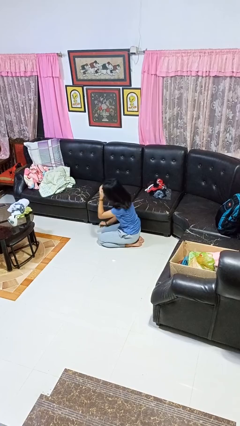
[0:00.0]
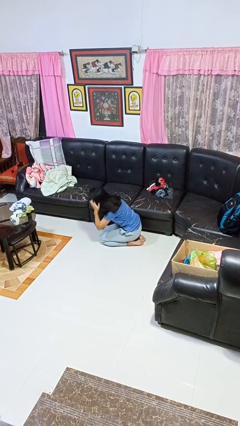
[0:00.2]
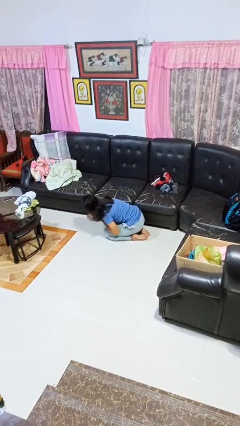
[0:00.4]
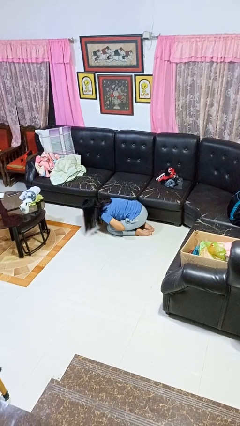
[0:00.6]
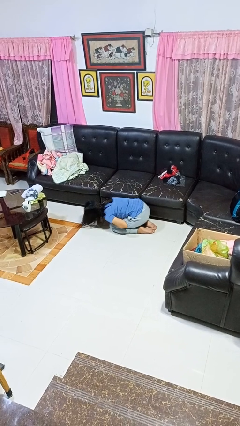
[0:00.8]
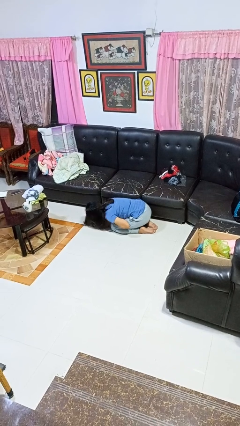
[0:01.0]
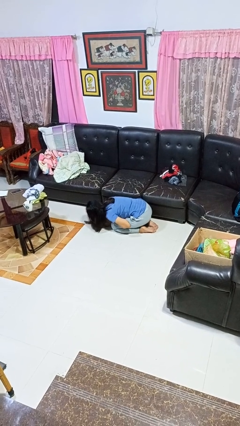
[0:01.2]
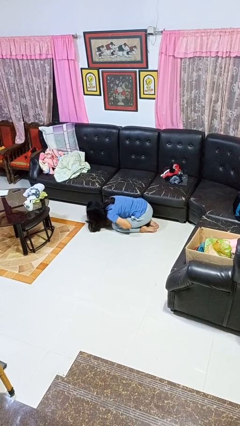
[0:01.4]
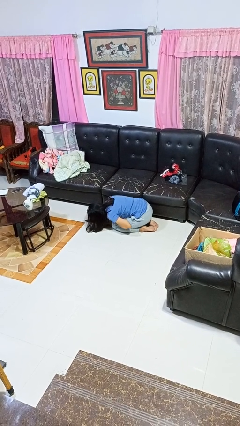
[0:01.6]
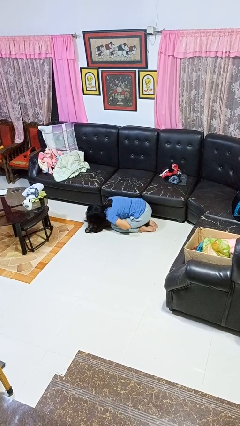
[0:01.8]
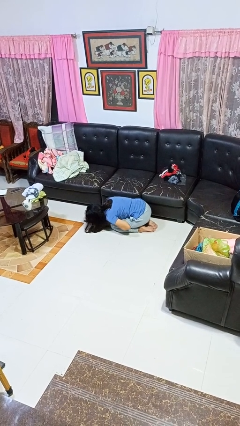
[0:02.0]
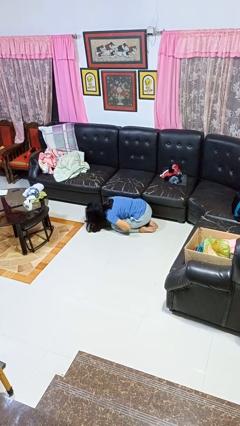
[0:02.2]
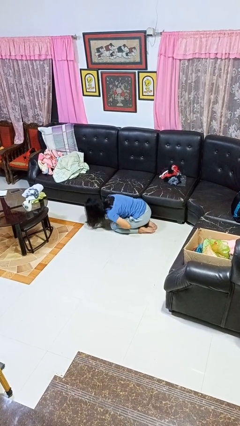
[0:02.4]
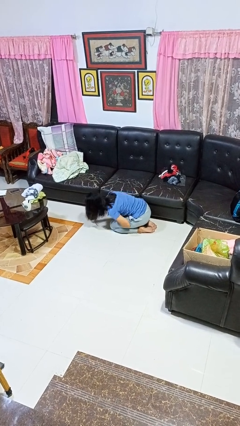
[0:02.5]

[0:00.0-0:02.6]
person searches under couch

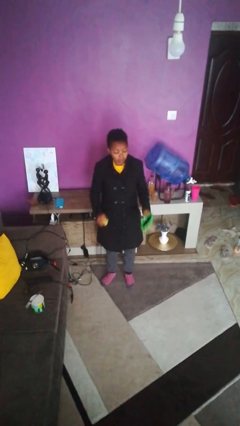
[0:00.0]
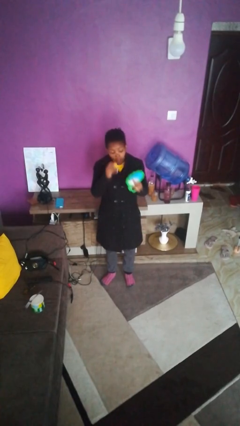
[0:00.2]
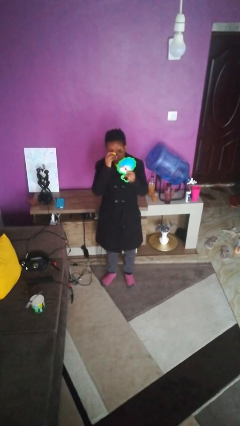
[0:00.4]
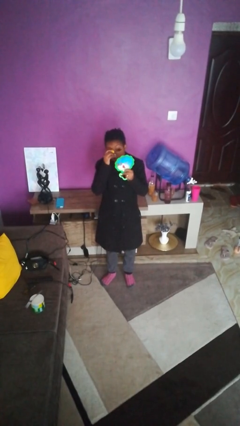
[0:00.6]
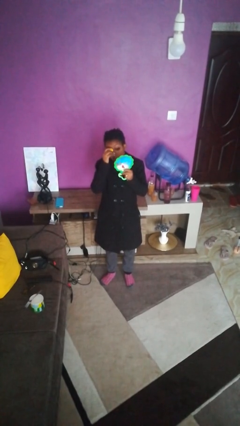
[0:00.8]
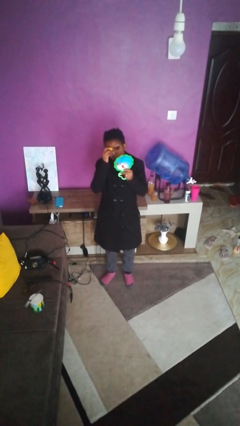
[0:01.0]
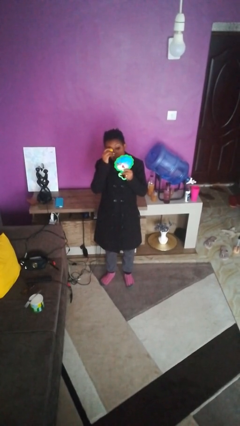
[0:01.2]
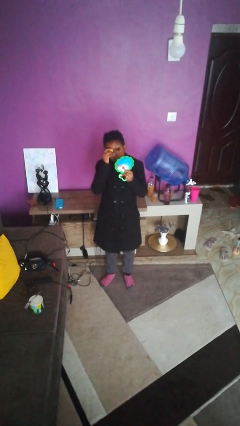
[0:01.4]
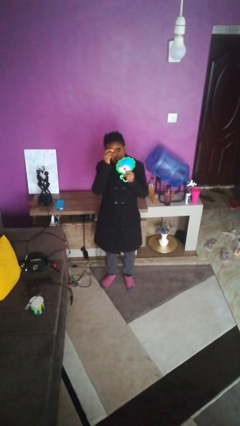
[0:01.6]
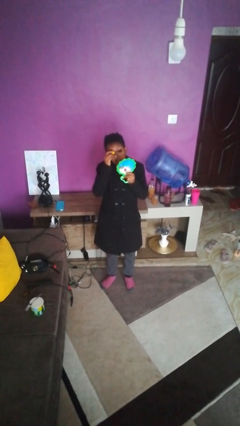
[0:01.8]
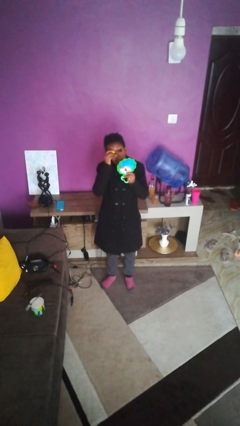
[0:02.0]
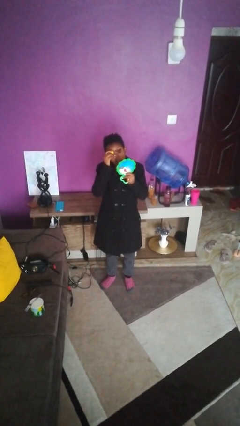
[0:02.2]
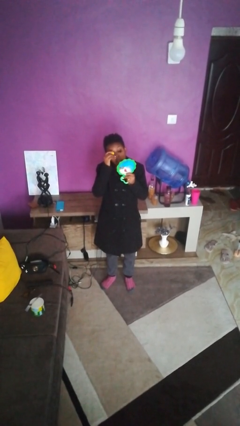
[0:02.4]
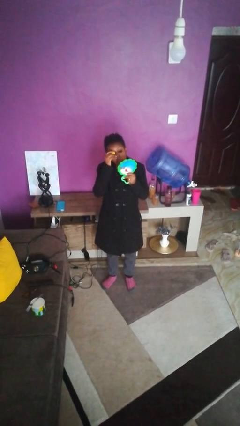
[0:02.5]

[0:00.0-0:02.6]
person applies eye makeup

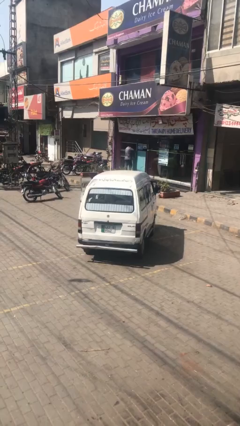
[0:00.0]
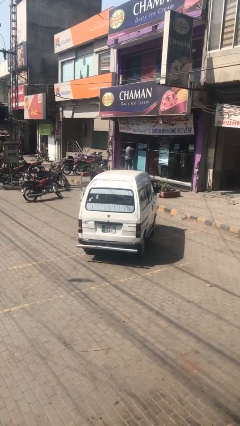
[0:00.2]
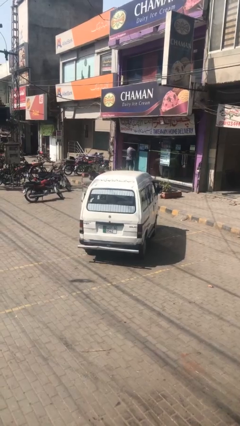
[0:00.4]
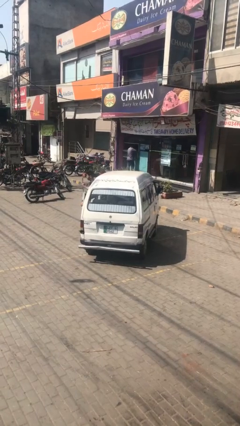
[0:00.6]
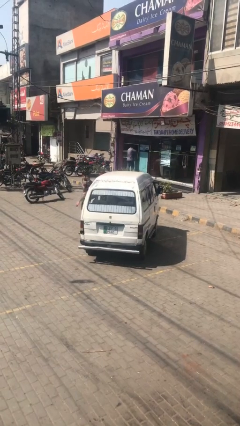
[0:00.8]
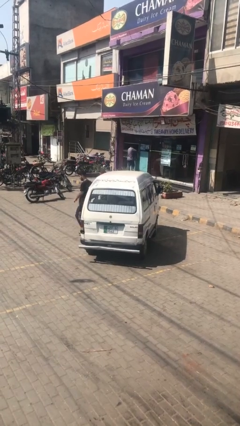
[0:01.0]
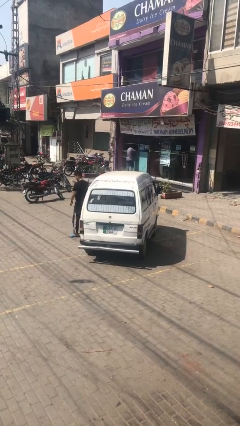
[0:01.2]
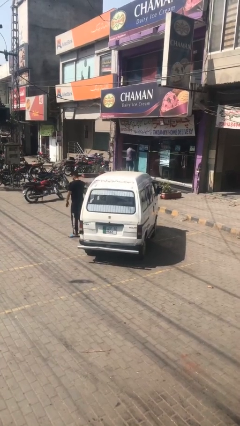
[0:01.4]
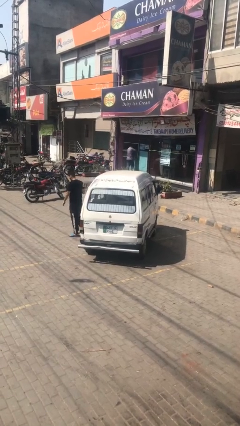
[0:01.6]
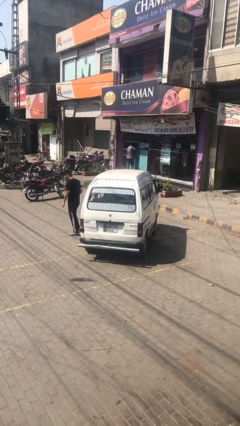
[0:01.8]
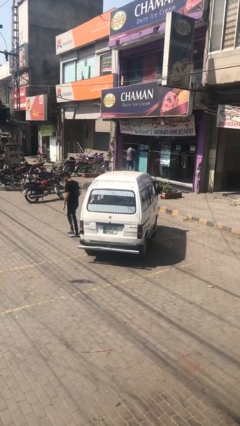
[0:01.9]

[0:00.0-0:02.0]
car drops off person

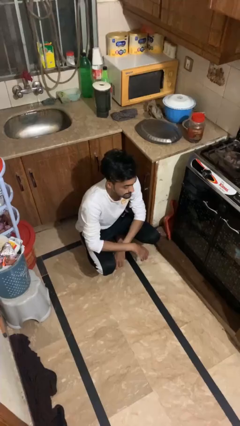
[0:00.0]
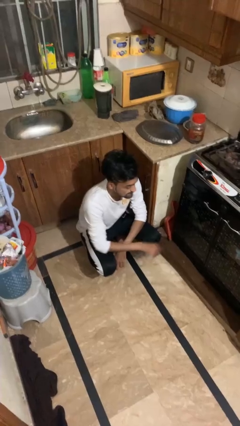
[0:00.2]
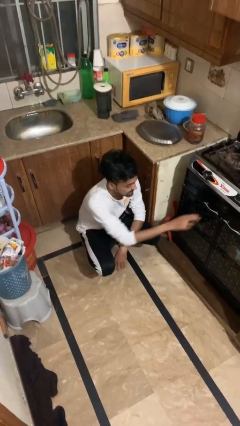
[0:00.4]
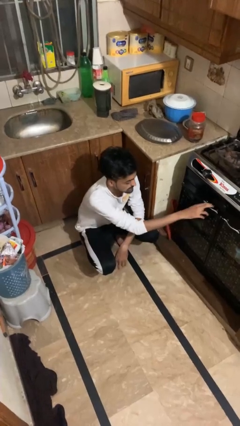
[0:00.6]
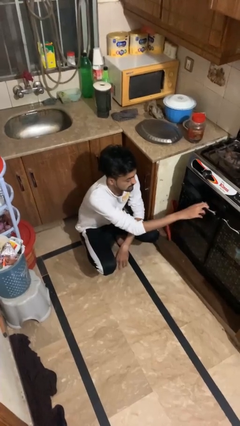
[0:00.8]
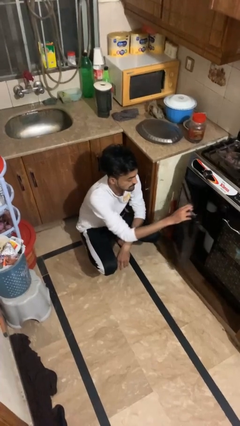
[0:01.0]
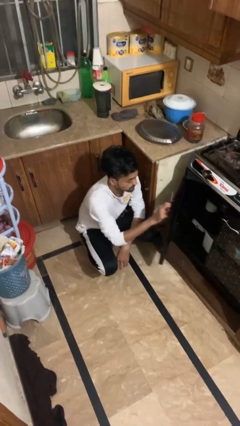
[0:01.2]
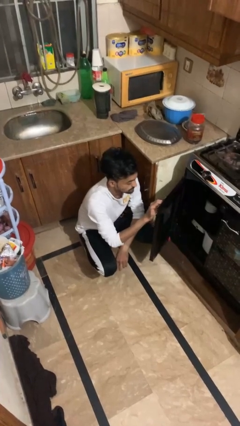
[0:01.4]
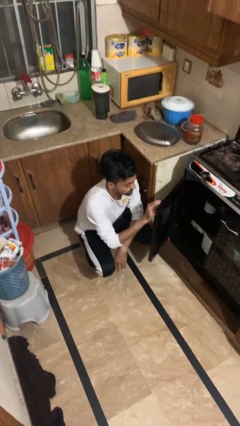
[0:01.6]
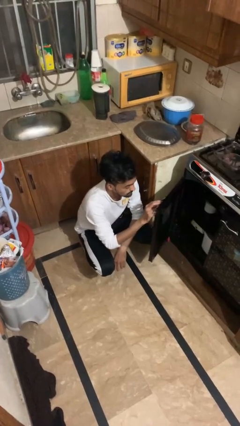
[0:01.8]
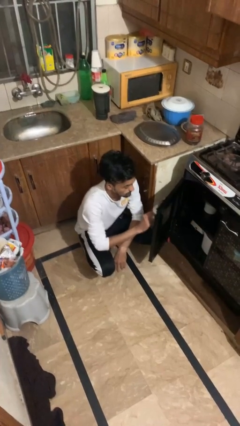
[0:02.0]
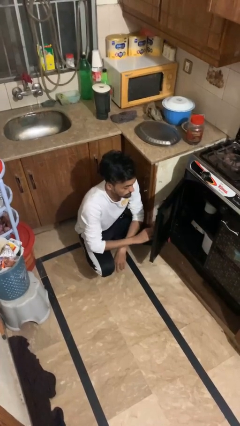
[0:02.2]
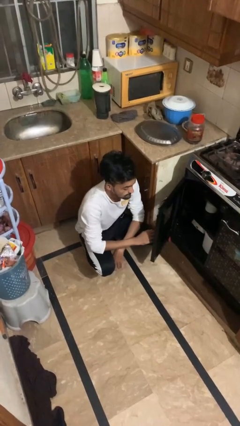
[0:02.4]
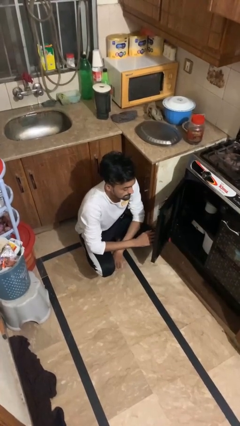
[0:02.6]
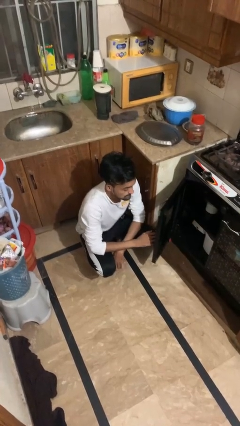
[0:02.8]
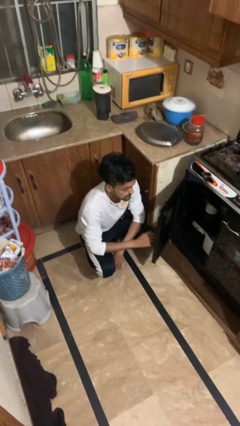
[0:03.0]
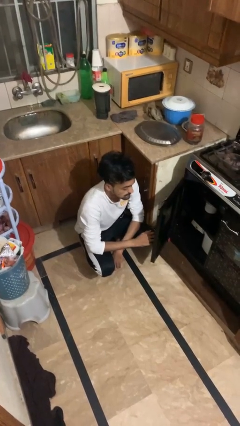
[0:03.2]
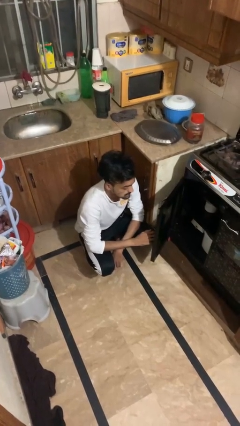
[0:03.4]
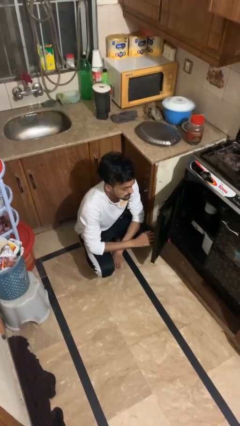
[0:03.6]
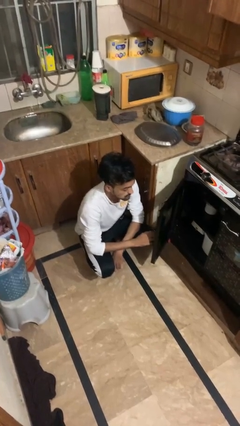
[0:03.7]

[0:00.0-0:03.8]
person opens oven door

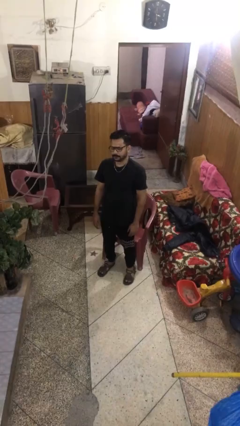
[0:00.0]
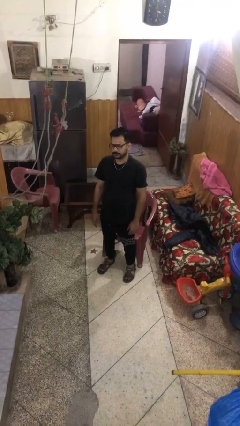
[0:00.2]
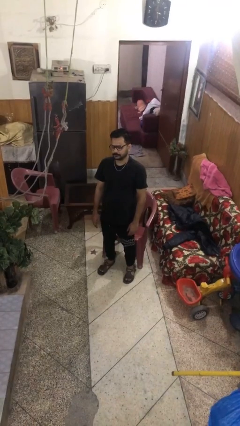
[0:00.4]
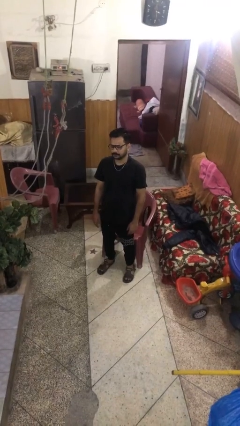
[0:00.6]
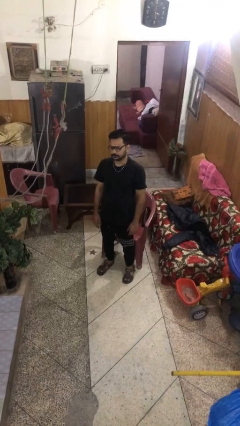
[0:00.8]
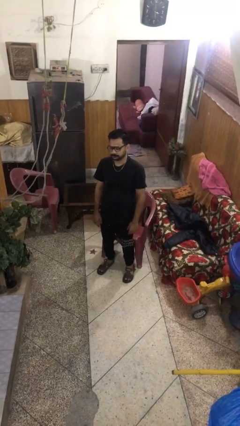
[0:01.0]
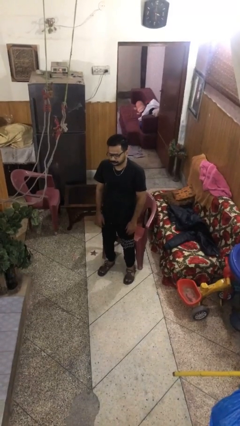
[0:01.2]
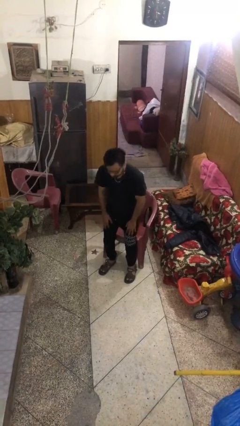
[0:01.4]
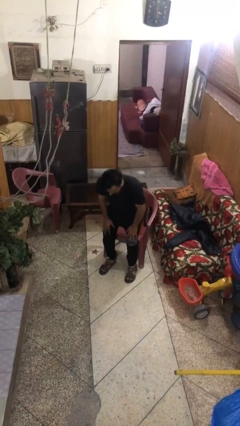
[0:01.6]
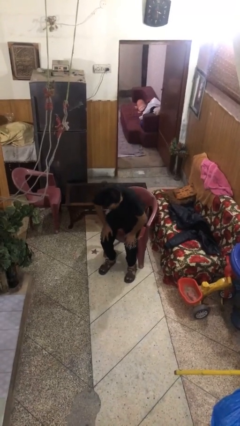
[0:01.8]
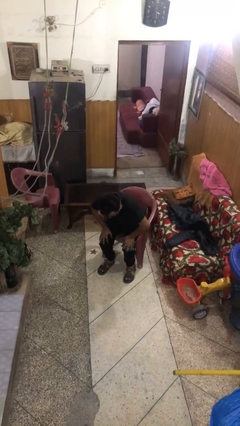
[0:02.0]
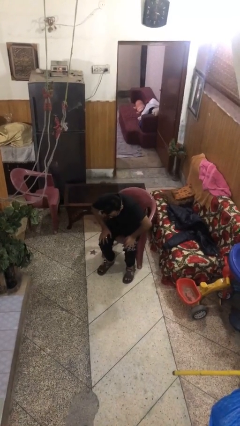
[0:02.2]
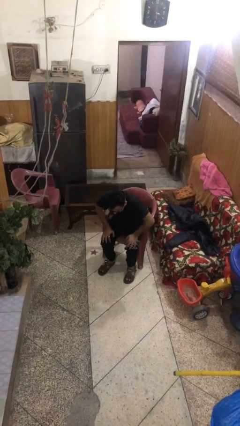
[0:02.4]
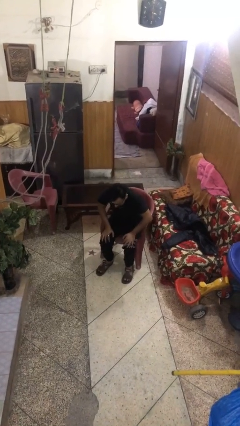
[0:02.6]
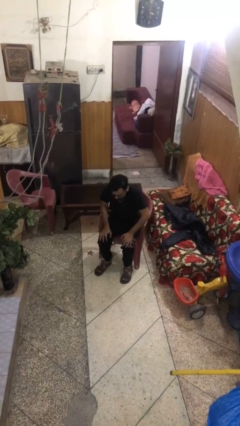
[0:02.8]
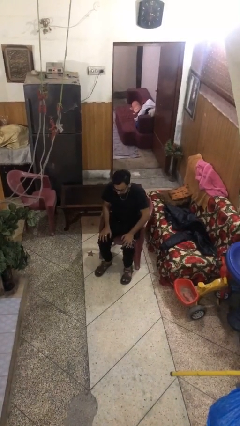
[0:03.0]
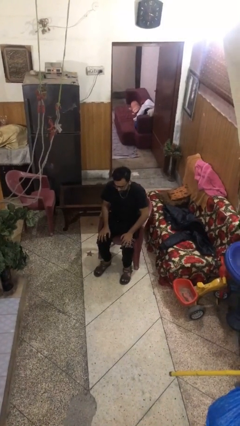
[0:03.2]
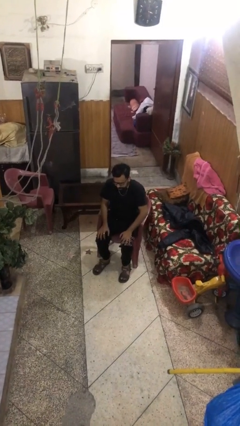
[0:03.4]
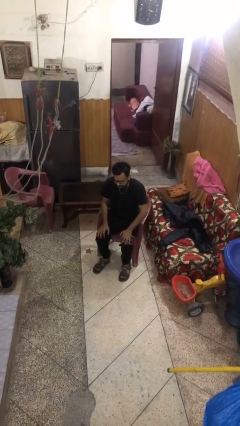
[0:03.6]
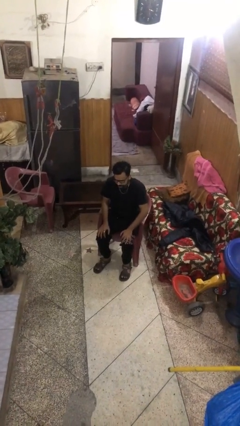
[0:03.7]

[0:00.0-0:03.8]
person sits down

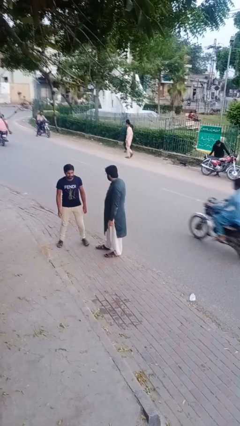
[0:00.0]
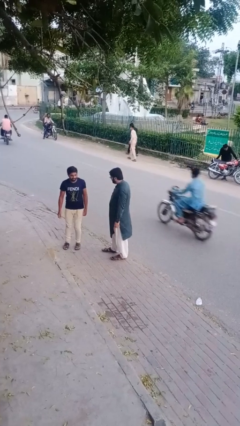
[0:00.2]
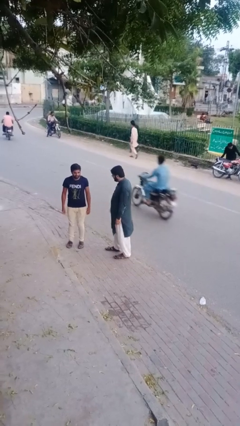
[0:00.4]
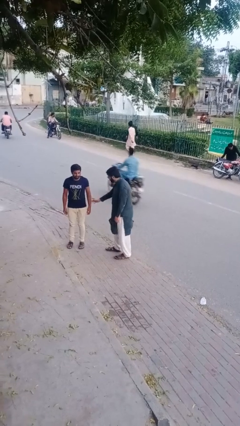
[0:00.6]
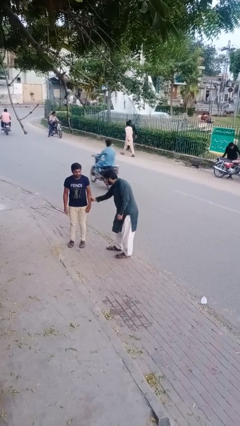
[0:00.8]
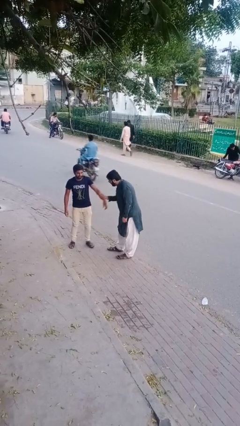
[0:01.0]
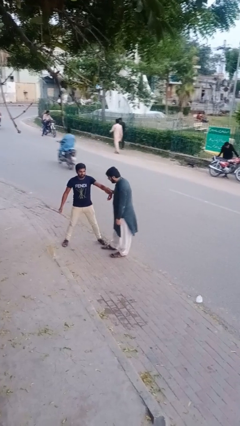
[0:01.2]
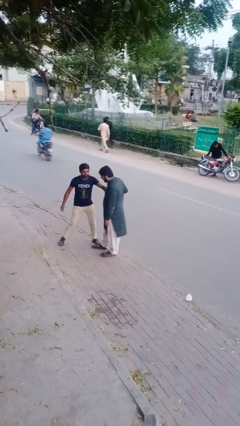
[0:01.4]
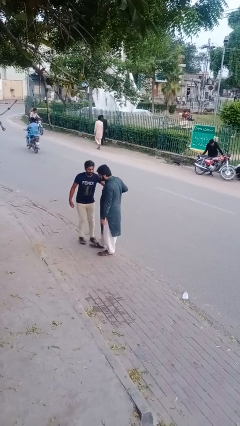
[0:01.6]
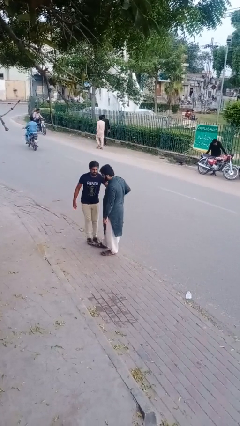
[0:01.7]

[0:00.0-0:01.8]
person grabs person by forearm

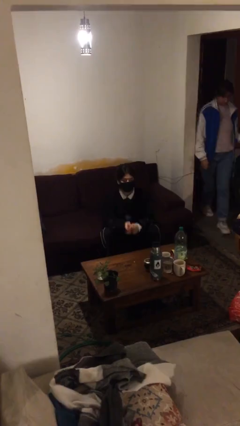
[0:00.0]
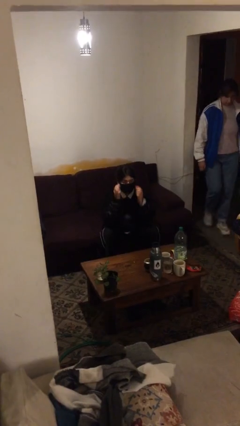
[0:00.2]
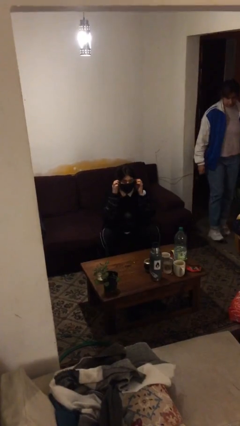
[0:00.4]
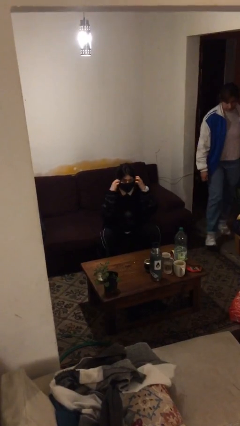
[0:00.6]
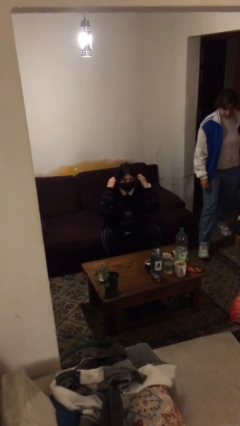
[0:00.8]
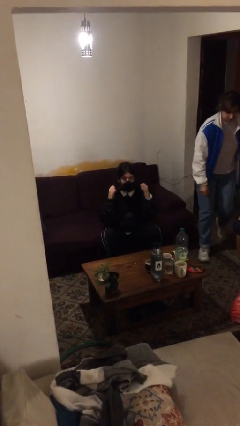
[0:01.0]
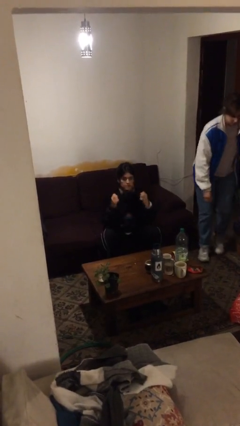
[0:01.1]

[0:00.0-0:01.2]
person takes off facemask
